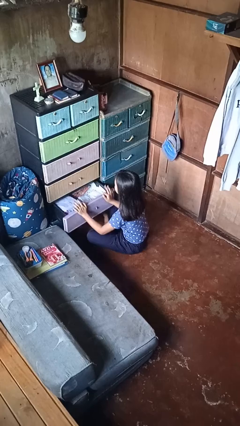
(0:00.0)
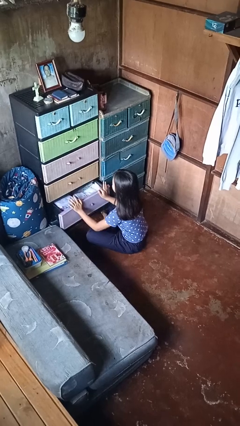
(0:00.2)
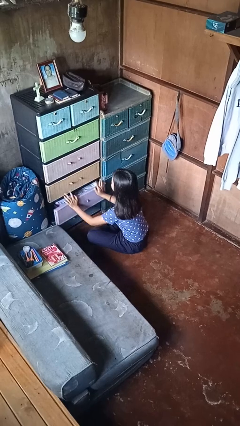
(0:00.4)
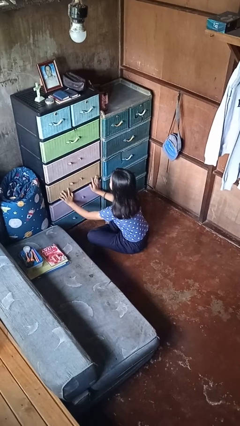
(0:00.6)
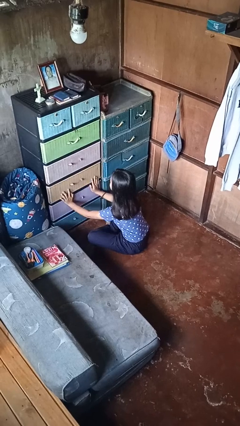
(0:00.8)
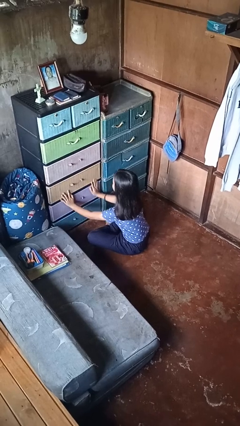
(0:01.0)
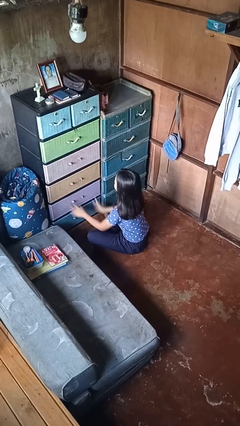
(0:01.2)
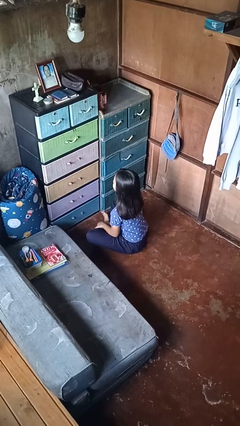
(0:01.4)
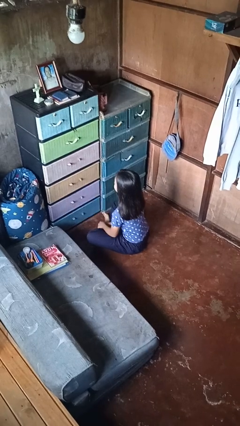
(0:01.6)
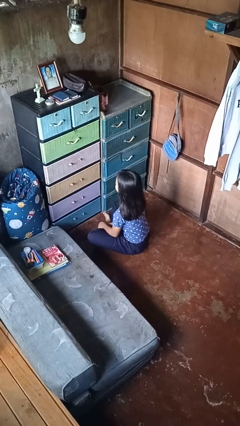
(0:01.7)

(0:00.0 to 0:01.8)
person closes dresser drawer

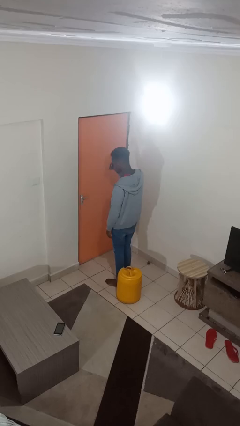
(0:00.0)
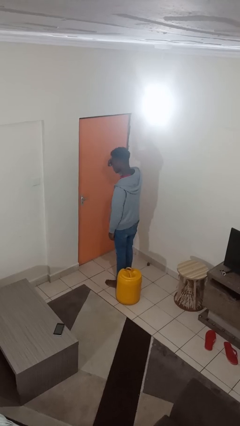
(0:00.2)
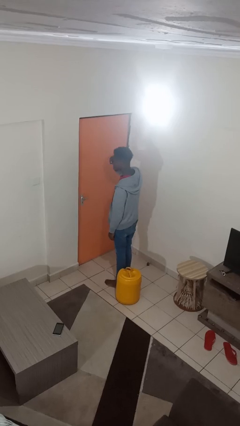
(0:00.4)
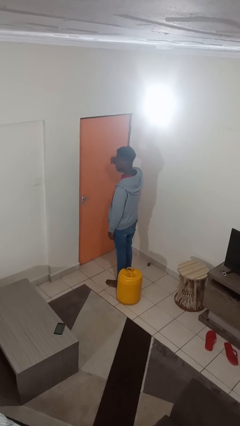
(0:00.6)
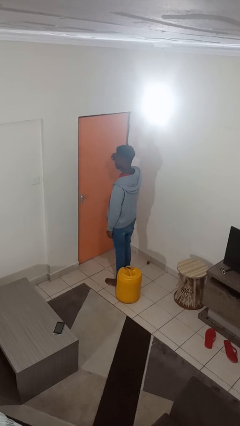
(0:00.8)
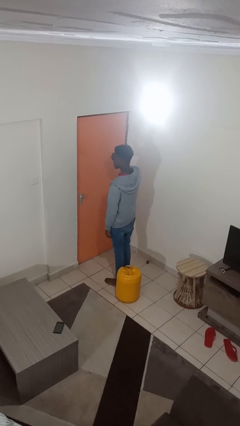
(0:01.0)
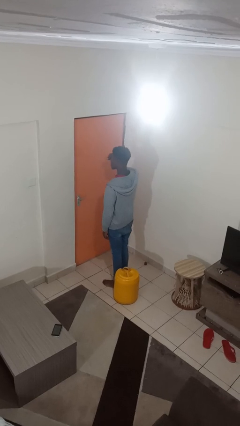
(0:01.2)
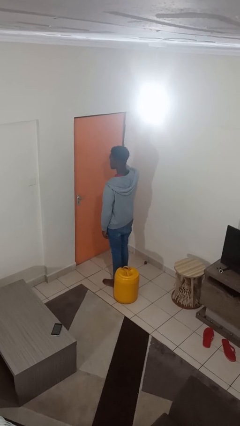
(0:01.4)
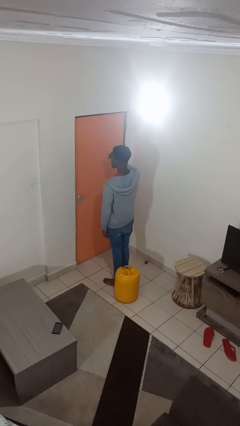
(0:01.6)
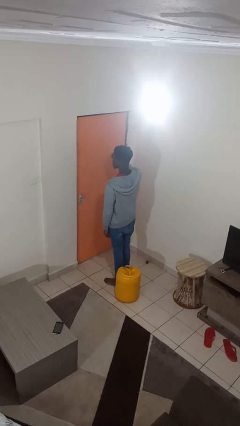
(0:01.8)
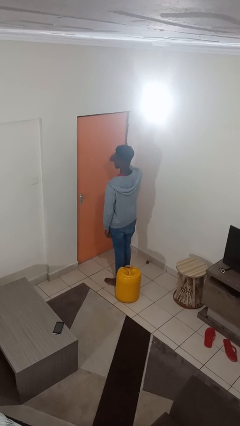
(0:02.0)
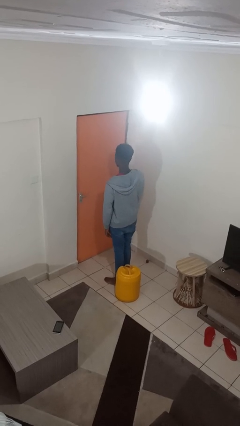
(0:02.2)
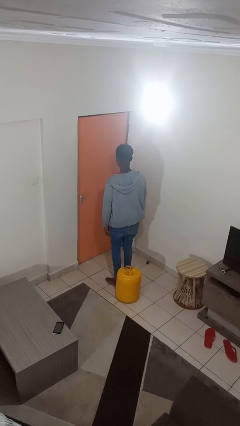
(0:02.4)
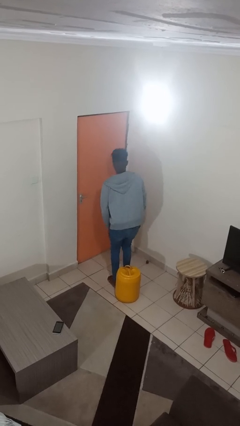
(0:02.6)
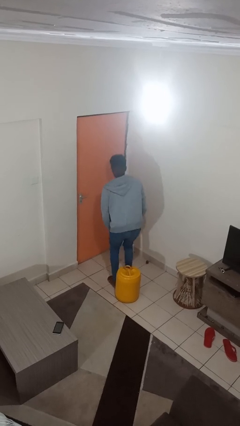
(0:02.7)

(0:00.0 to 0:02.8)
person rubs eyes

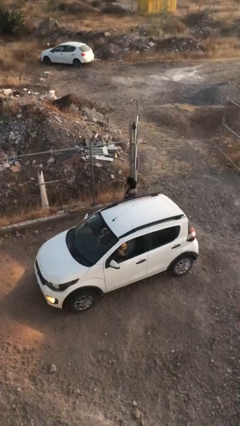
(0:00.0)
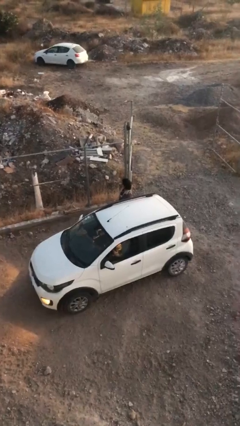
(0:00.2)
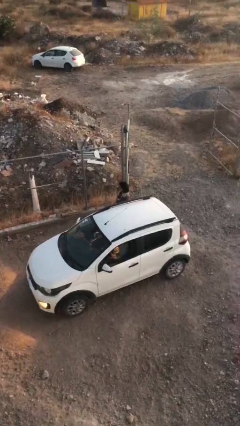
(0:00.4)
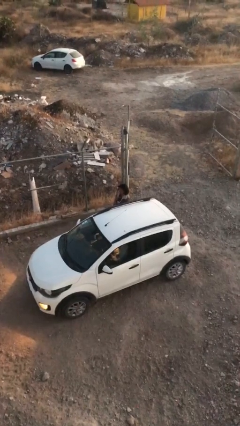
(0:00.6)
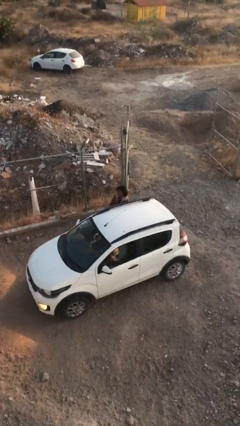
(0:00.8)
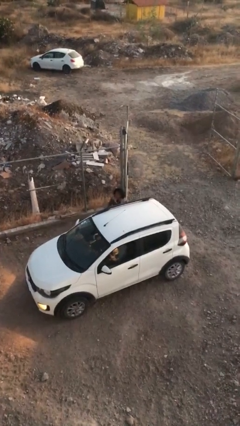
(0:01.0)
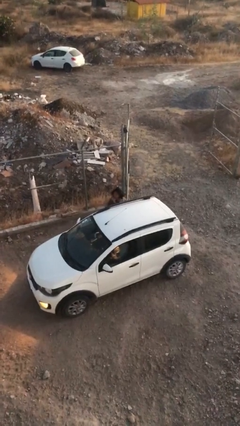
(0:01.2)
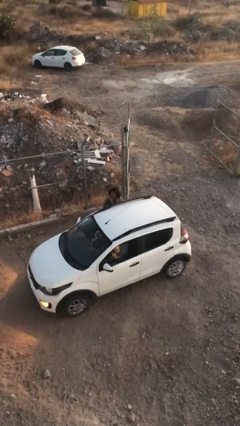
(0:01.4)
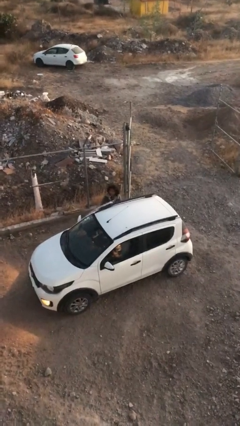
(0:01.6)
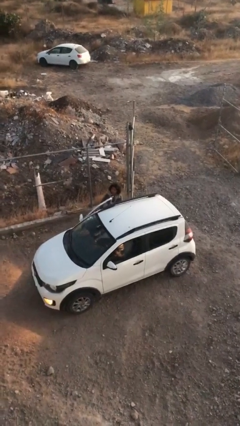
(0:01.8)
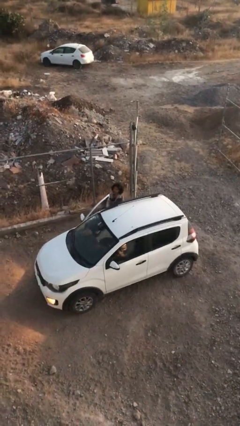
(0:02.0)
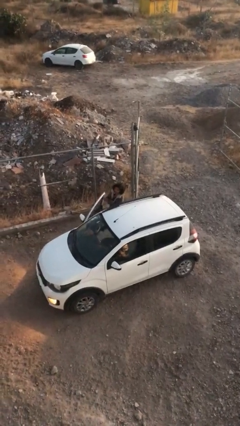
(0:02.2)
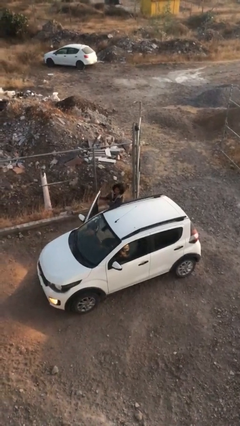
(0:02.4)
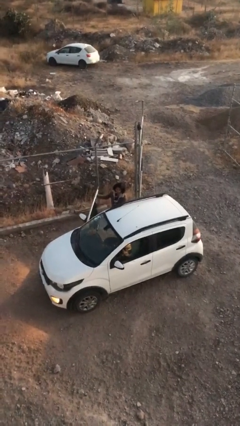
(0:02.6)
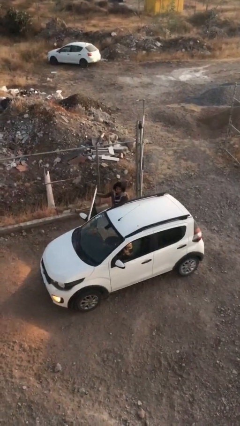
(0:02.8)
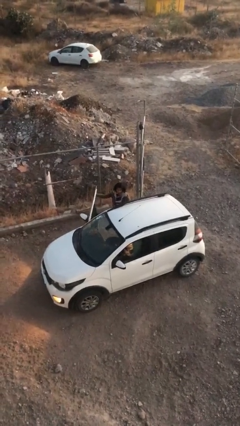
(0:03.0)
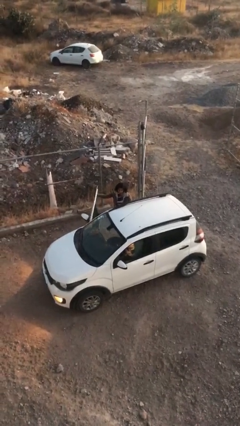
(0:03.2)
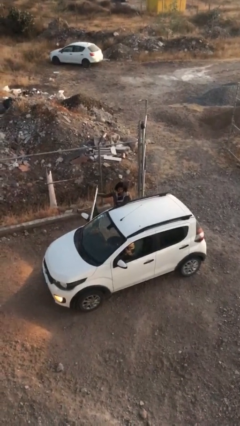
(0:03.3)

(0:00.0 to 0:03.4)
person opens car door

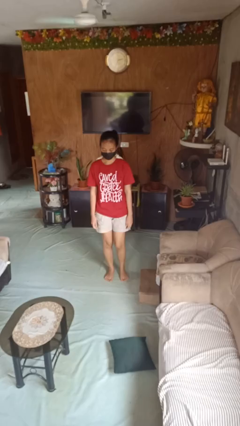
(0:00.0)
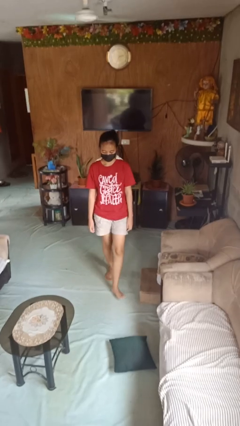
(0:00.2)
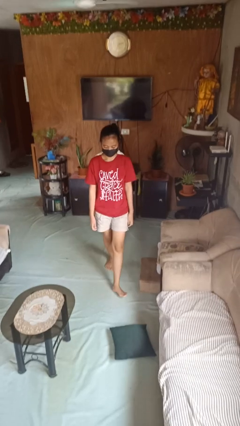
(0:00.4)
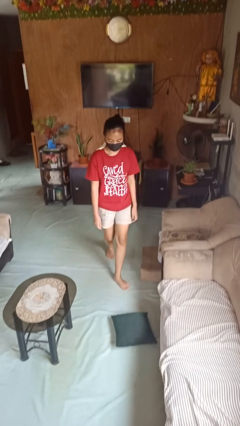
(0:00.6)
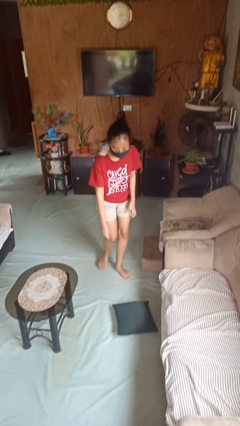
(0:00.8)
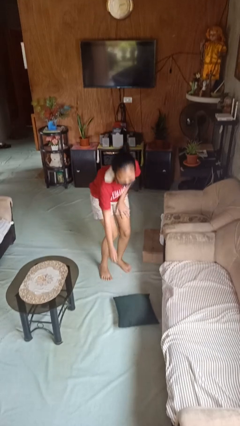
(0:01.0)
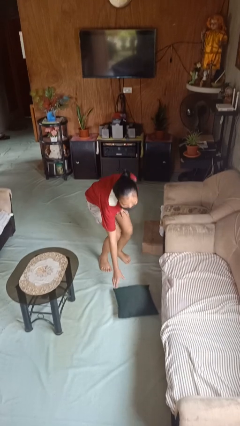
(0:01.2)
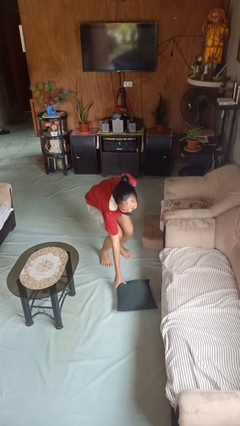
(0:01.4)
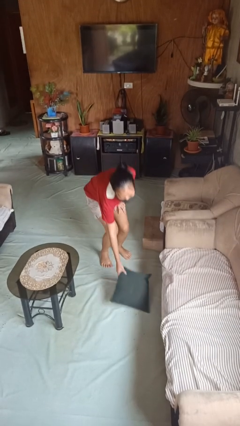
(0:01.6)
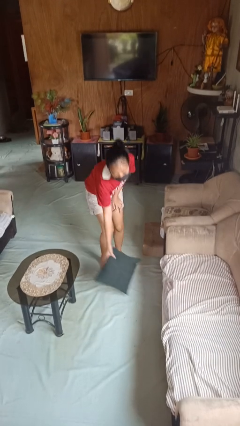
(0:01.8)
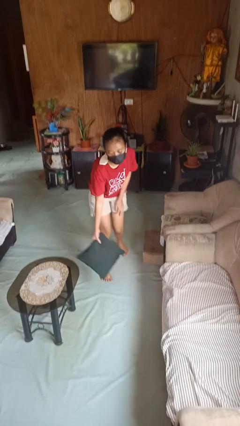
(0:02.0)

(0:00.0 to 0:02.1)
person picks up object from floor

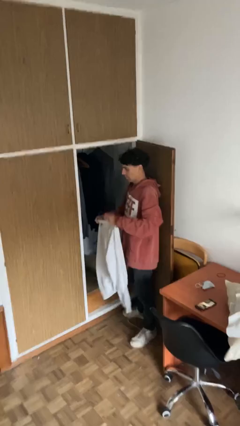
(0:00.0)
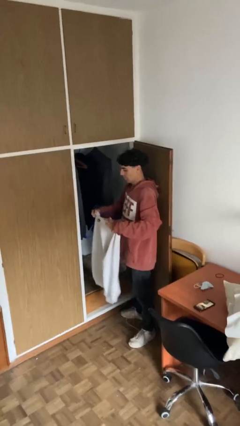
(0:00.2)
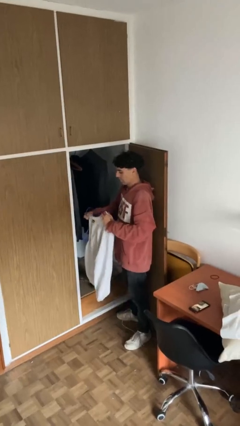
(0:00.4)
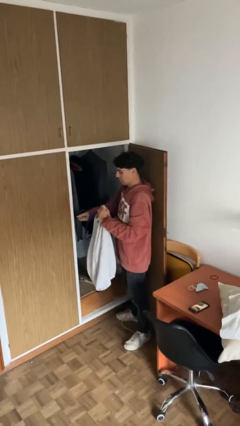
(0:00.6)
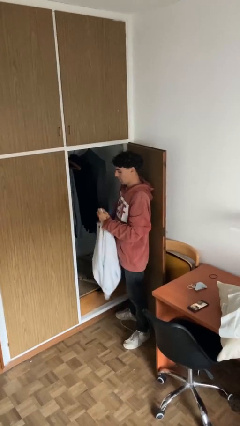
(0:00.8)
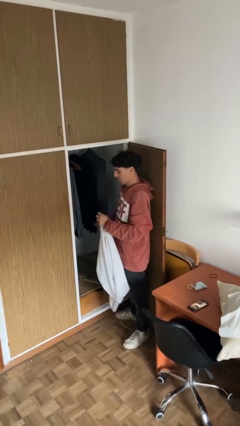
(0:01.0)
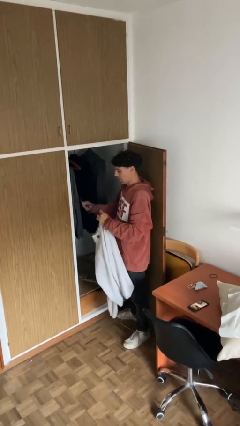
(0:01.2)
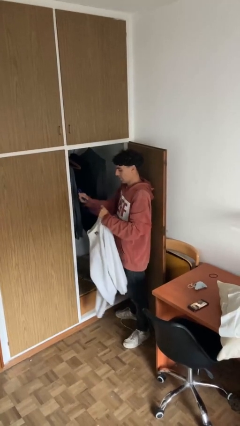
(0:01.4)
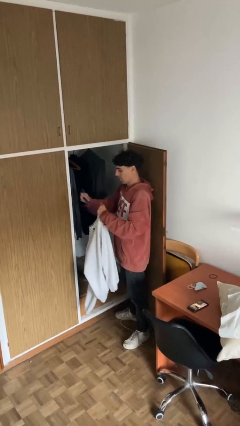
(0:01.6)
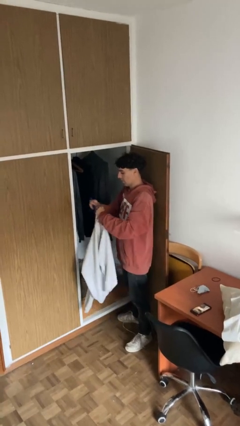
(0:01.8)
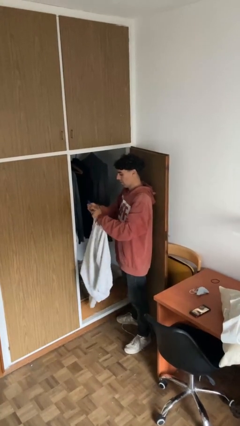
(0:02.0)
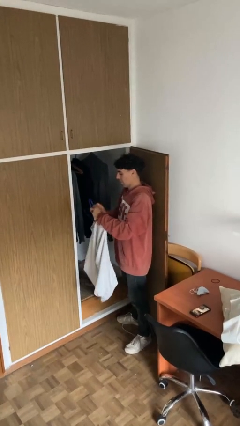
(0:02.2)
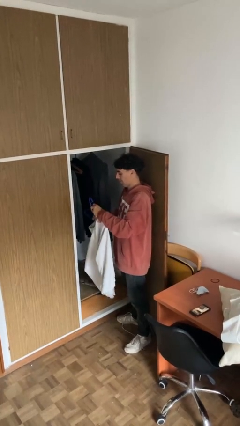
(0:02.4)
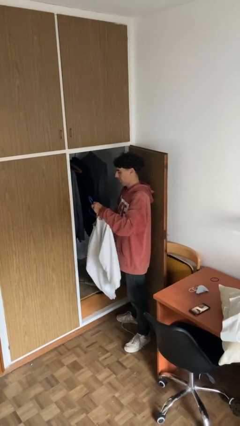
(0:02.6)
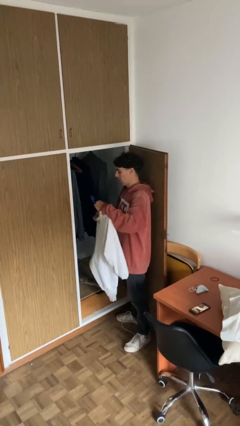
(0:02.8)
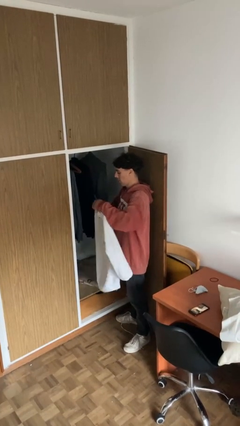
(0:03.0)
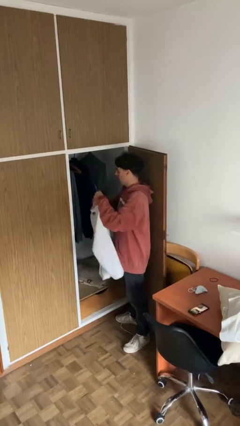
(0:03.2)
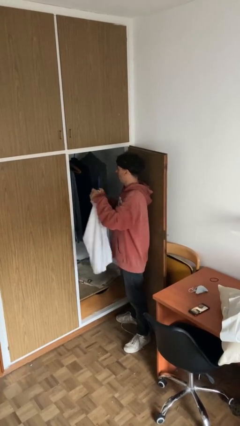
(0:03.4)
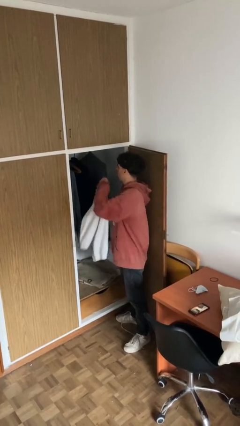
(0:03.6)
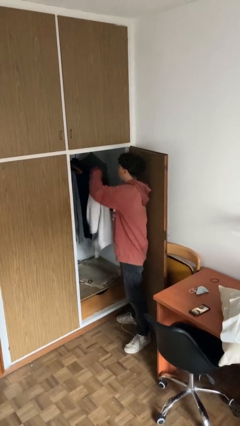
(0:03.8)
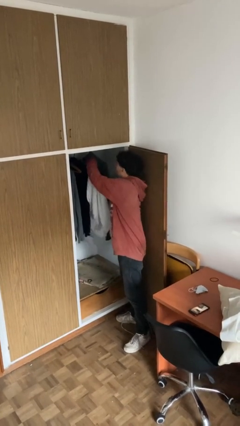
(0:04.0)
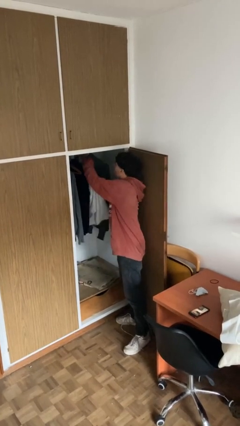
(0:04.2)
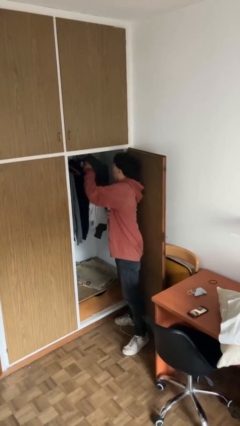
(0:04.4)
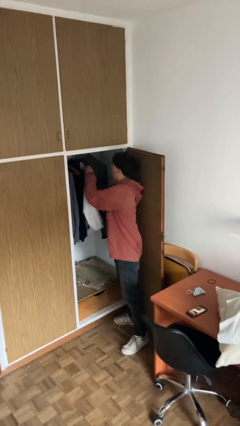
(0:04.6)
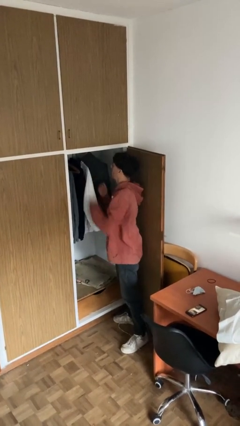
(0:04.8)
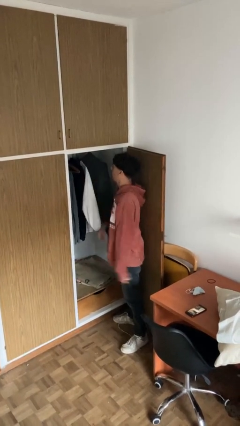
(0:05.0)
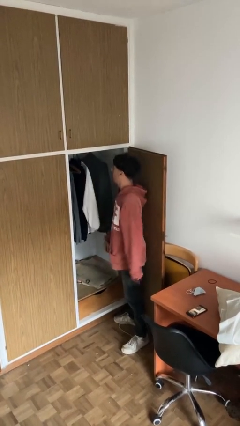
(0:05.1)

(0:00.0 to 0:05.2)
person puts clothes into closet

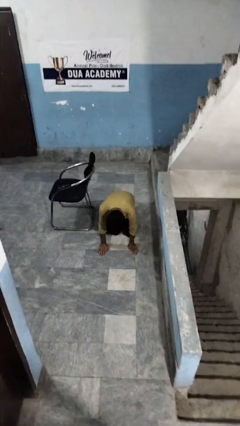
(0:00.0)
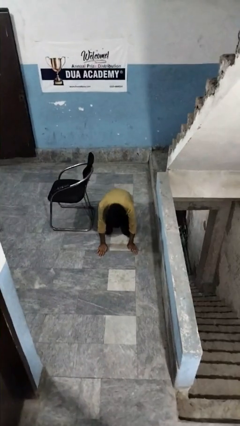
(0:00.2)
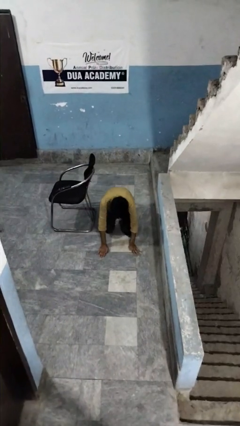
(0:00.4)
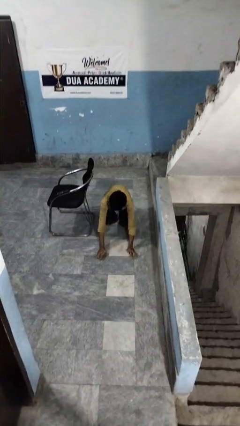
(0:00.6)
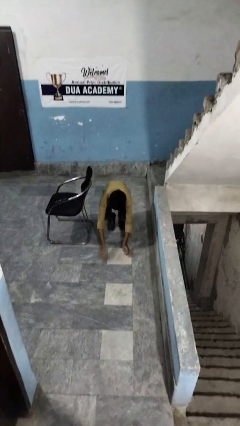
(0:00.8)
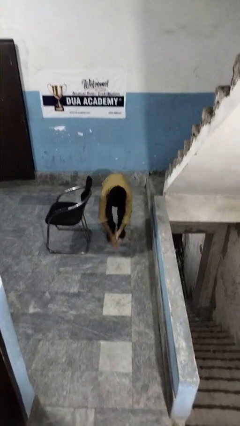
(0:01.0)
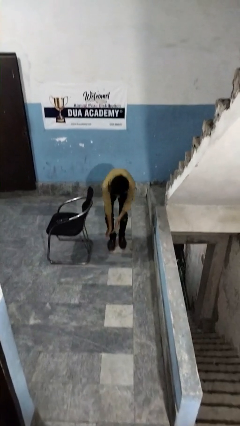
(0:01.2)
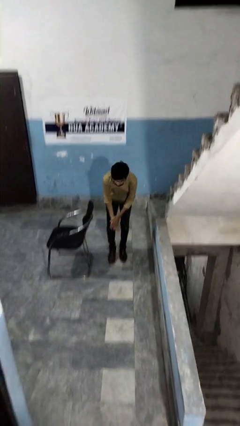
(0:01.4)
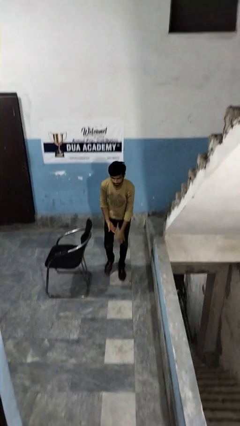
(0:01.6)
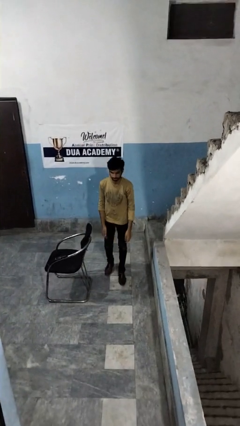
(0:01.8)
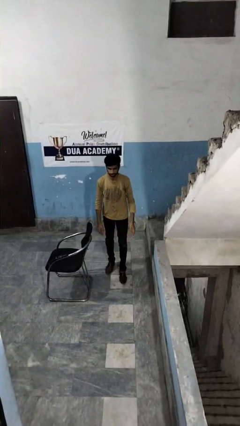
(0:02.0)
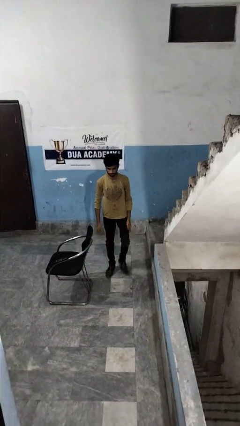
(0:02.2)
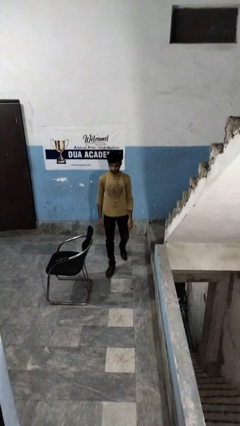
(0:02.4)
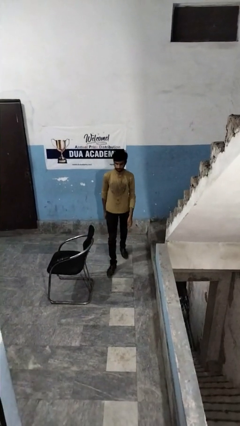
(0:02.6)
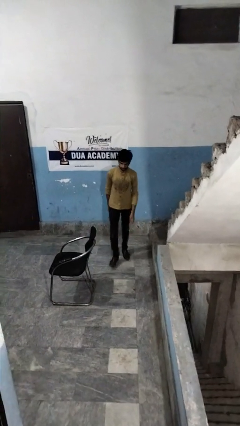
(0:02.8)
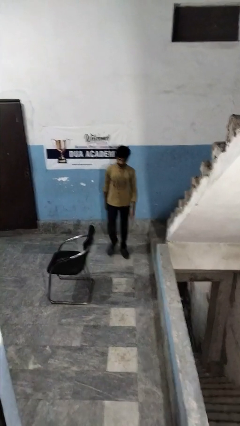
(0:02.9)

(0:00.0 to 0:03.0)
person stands up from floor
